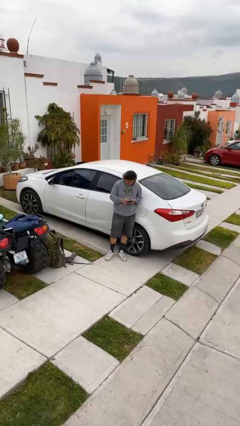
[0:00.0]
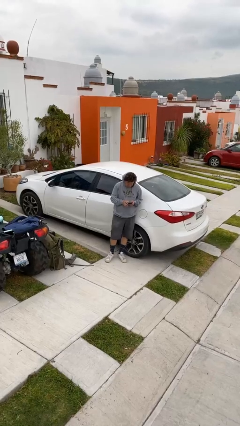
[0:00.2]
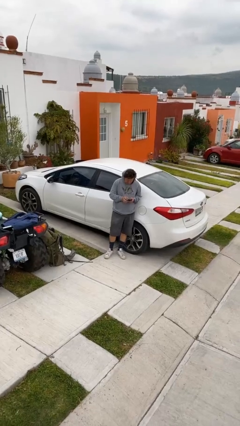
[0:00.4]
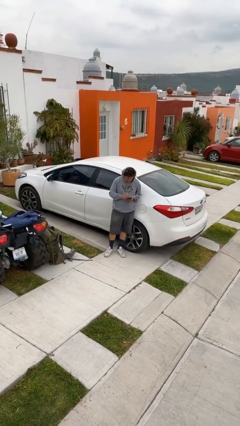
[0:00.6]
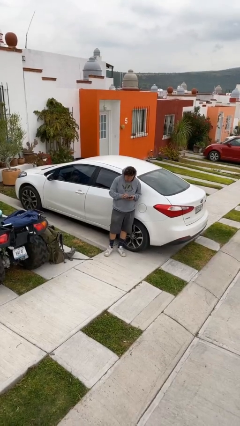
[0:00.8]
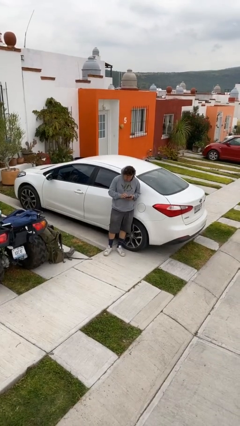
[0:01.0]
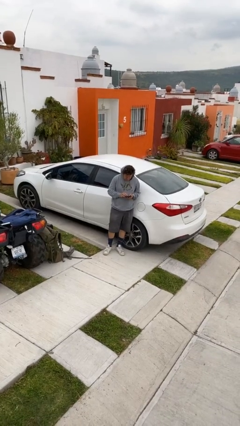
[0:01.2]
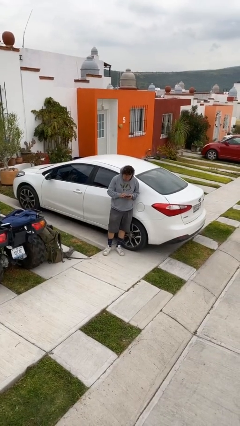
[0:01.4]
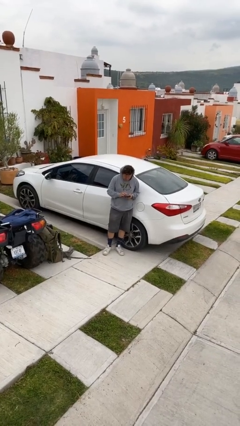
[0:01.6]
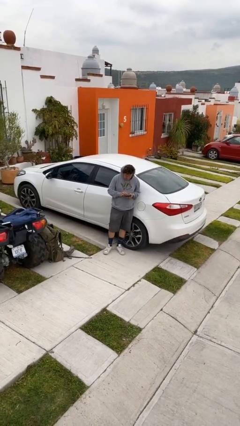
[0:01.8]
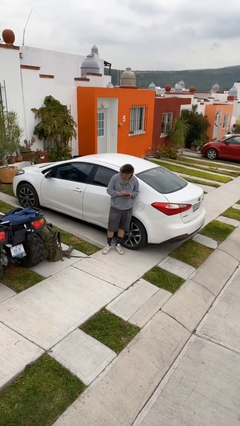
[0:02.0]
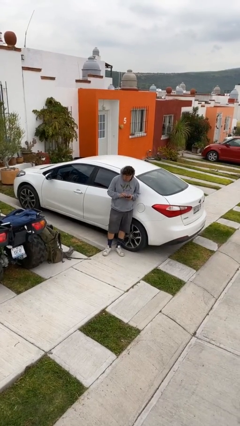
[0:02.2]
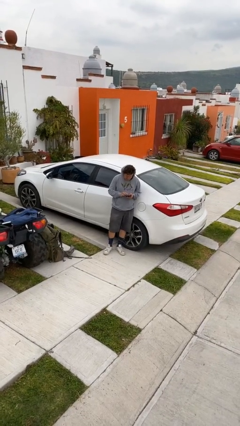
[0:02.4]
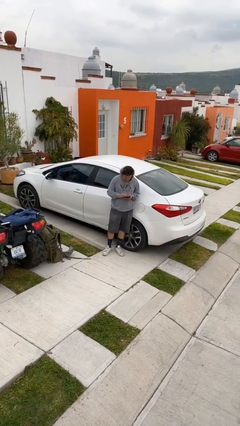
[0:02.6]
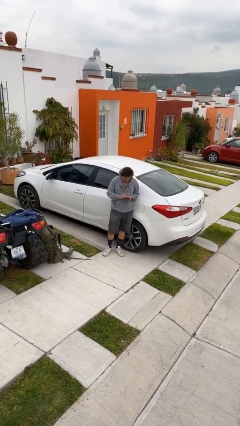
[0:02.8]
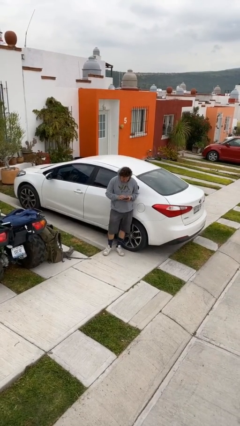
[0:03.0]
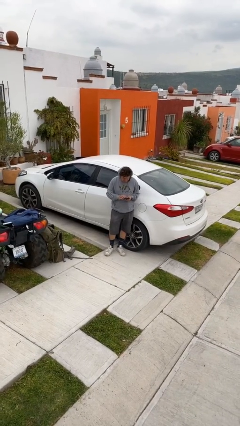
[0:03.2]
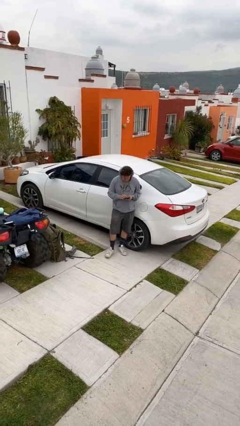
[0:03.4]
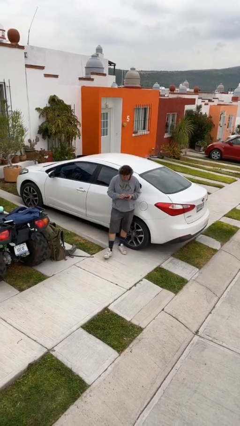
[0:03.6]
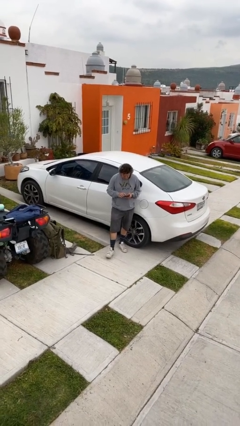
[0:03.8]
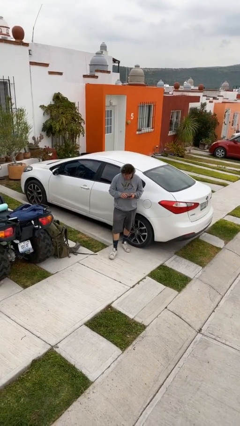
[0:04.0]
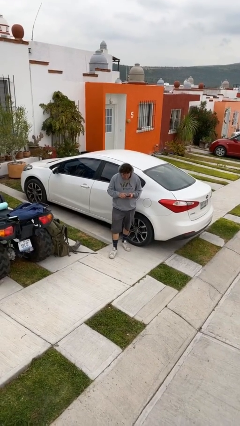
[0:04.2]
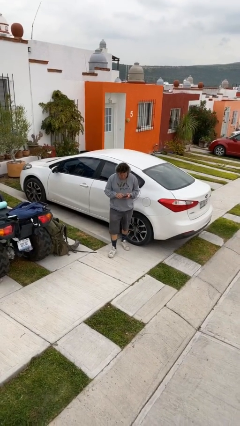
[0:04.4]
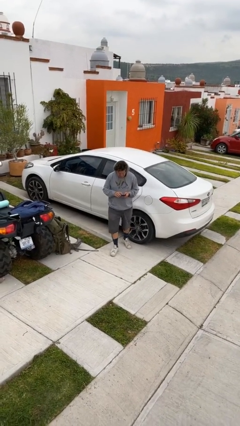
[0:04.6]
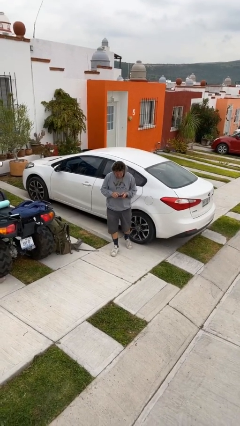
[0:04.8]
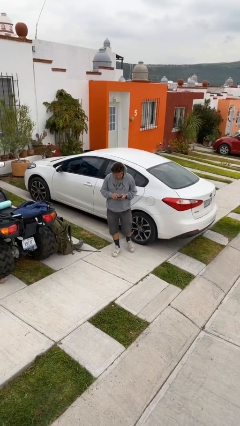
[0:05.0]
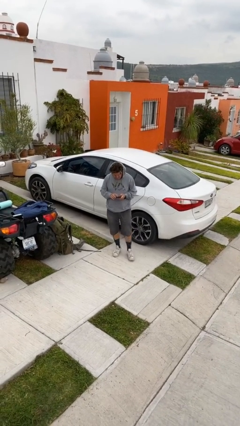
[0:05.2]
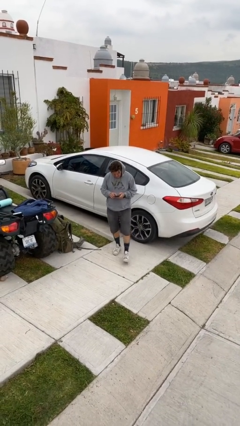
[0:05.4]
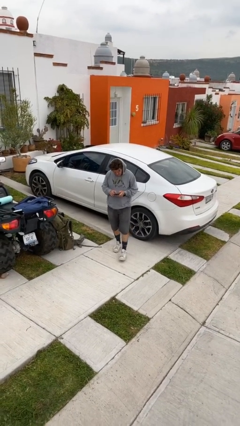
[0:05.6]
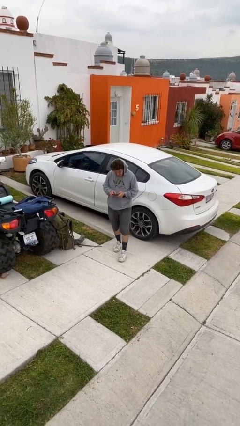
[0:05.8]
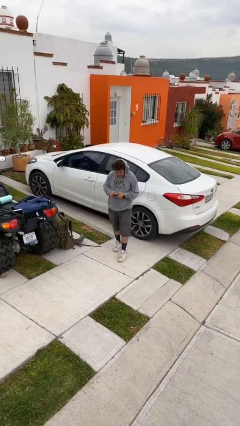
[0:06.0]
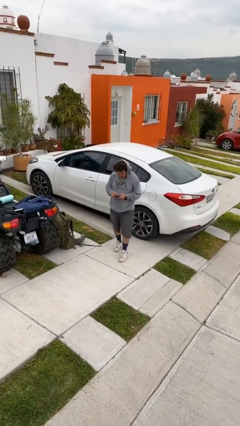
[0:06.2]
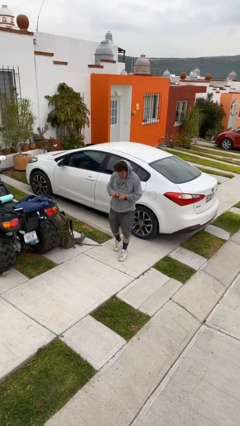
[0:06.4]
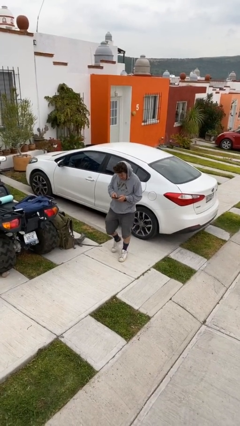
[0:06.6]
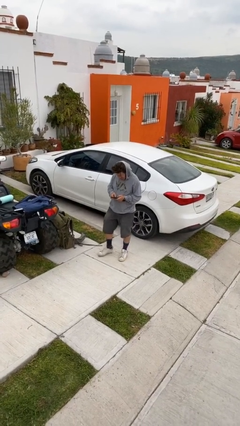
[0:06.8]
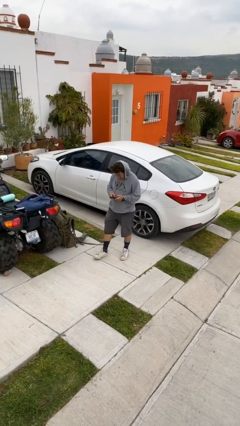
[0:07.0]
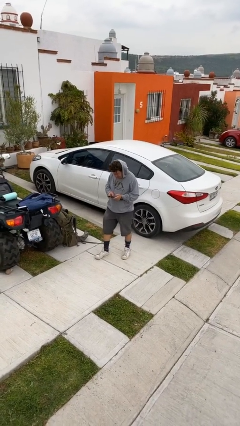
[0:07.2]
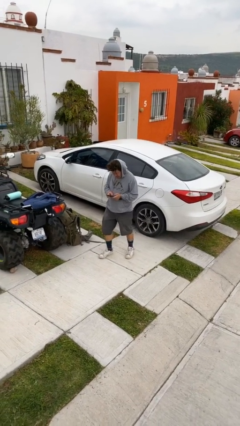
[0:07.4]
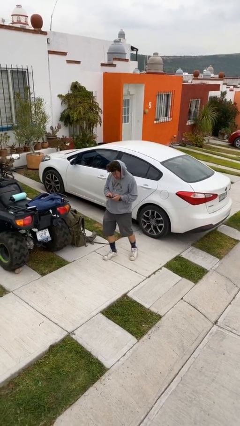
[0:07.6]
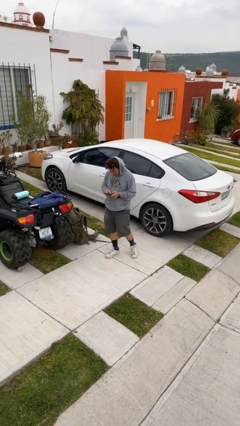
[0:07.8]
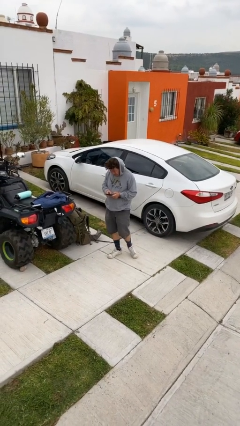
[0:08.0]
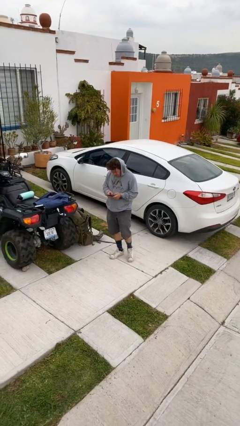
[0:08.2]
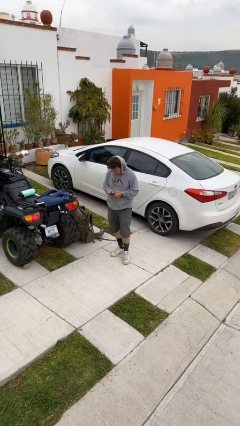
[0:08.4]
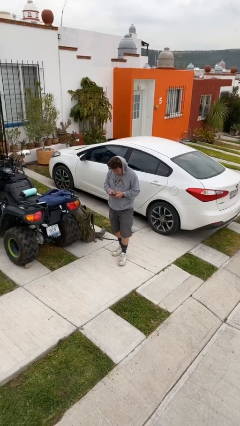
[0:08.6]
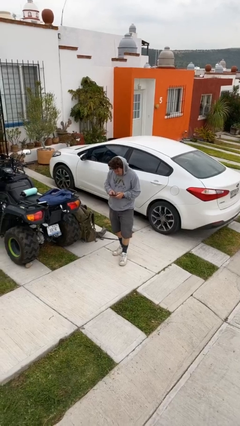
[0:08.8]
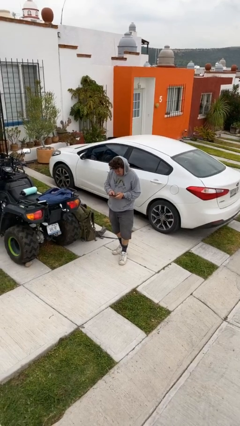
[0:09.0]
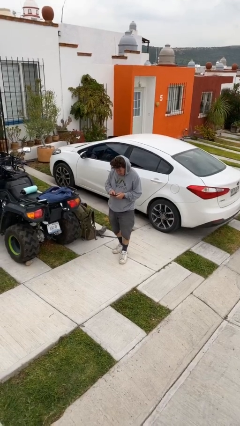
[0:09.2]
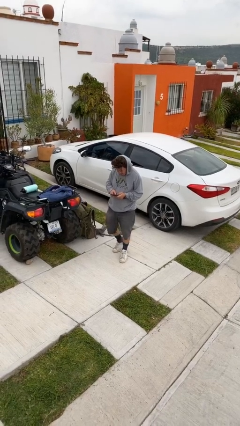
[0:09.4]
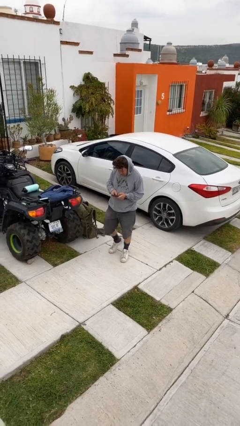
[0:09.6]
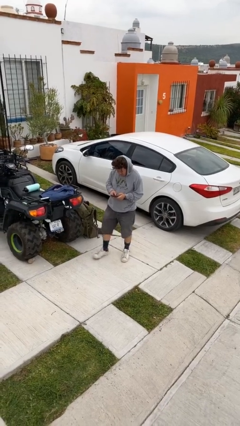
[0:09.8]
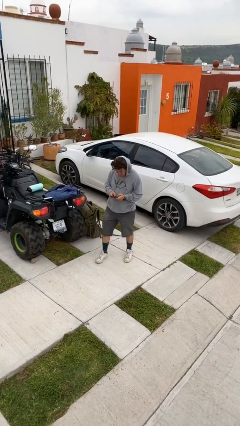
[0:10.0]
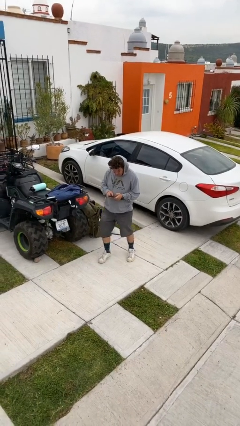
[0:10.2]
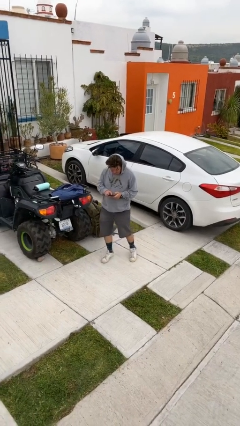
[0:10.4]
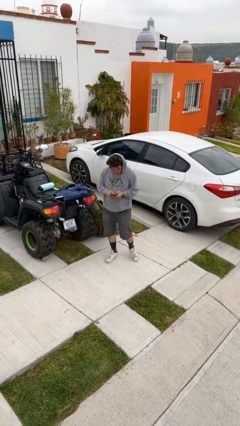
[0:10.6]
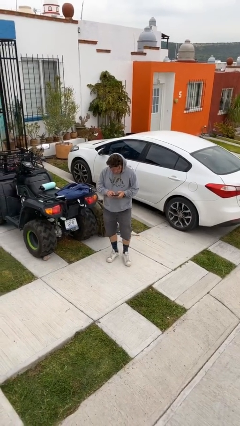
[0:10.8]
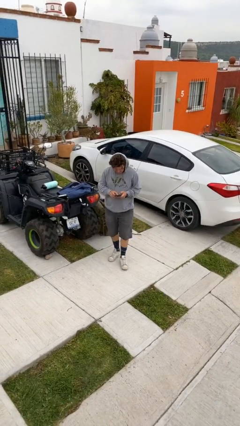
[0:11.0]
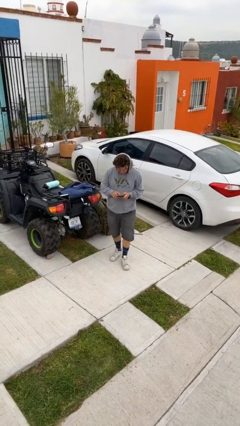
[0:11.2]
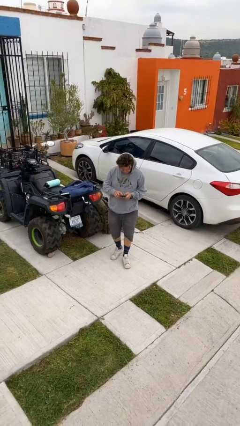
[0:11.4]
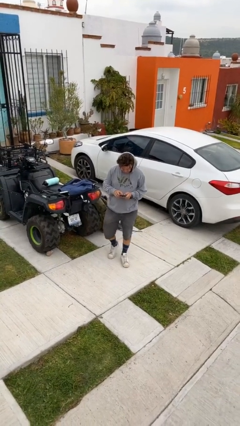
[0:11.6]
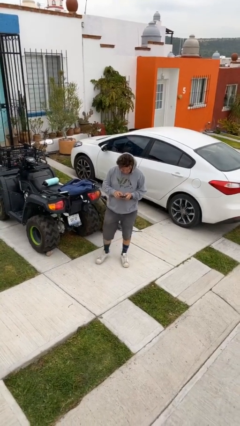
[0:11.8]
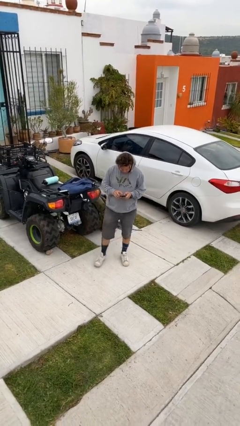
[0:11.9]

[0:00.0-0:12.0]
person texts on phone

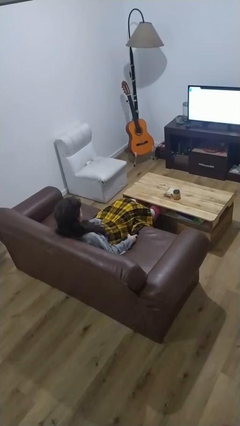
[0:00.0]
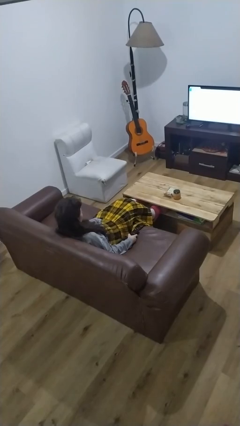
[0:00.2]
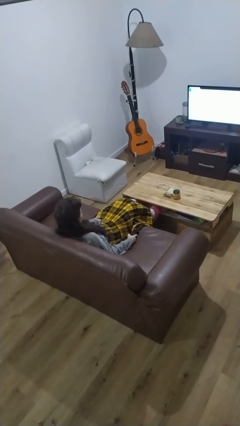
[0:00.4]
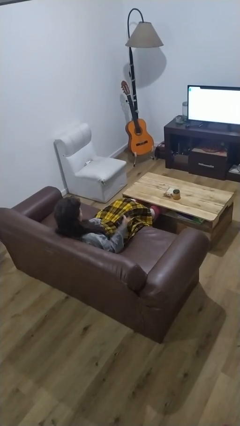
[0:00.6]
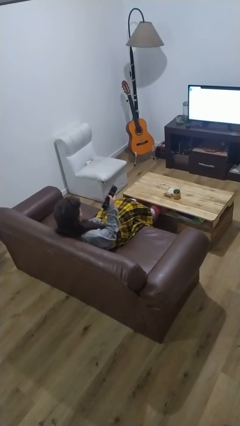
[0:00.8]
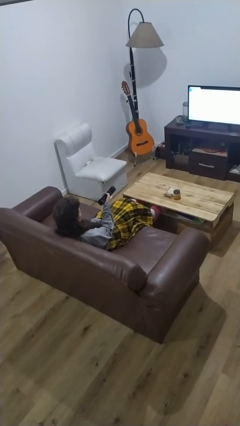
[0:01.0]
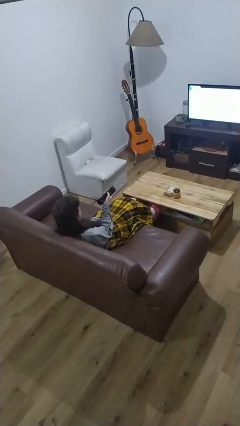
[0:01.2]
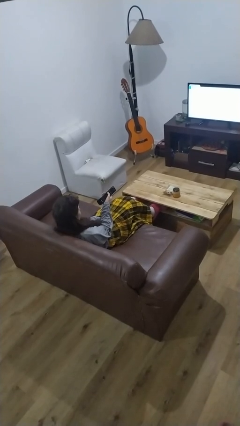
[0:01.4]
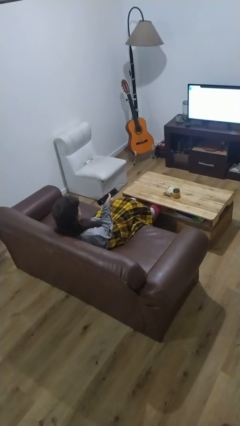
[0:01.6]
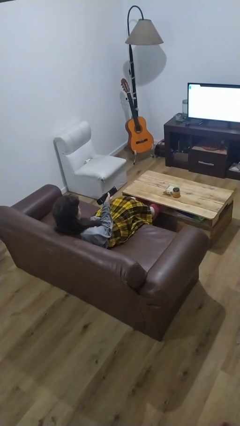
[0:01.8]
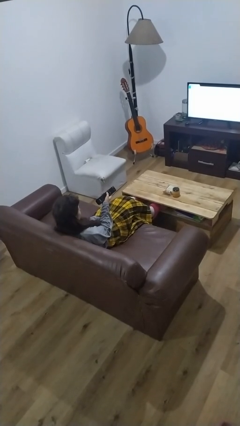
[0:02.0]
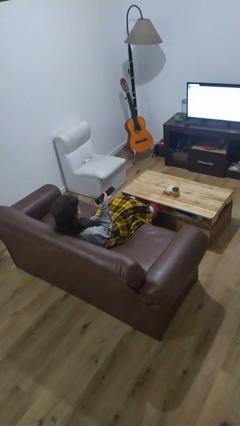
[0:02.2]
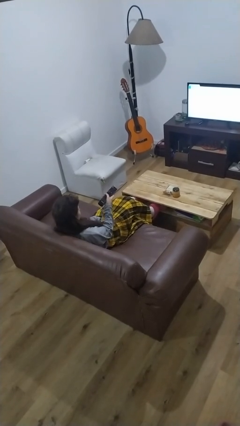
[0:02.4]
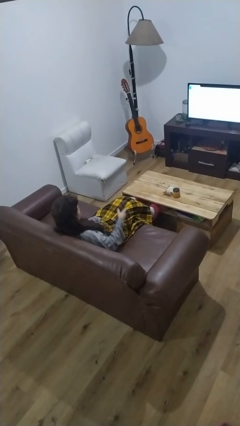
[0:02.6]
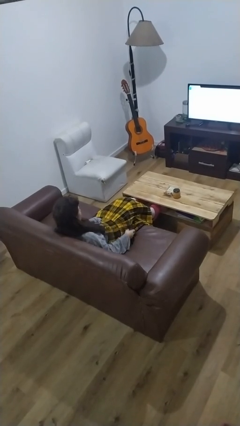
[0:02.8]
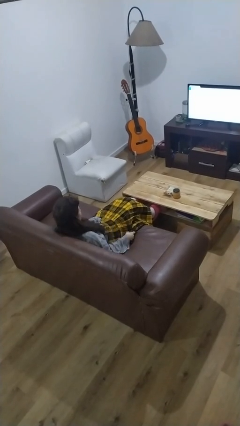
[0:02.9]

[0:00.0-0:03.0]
person uses television remote

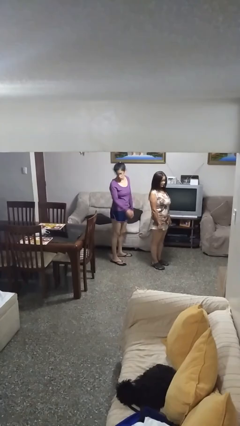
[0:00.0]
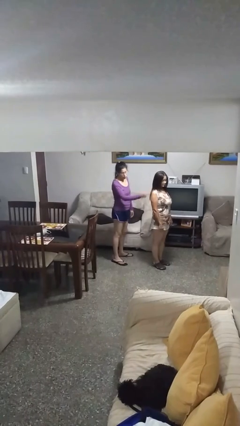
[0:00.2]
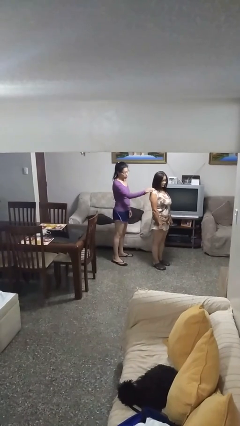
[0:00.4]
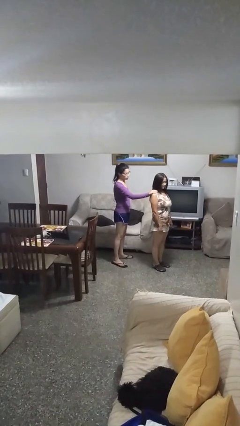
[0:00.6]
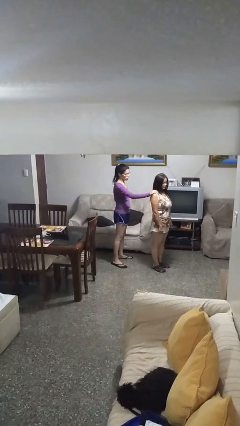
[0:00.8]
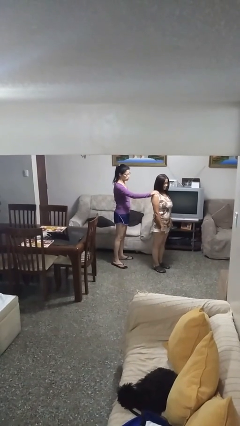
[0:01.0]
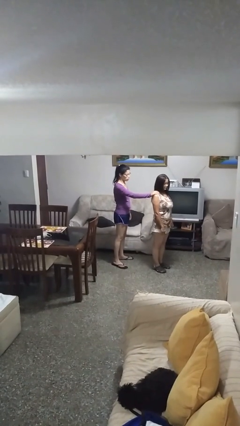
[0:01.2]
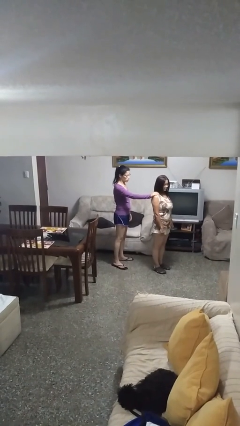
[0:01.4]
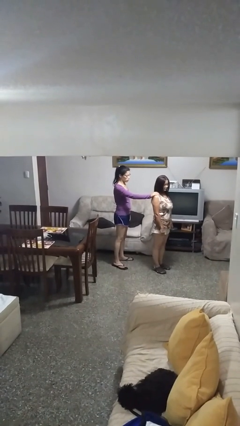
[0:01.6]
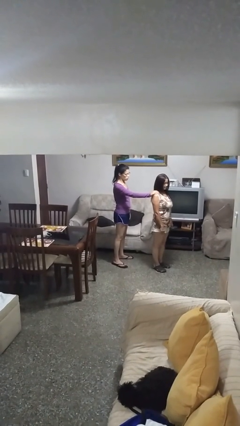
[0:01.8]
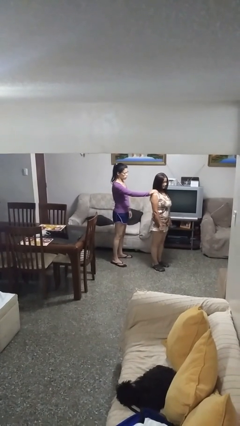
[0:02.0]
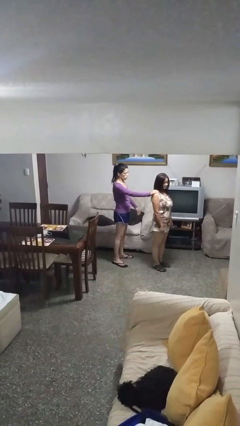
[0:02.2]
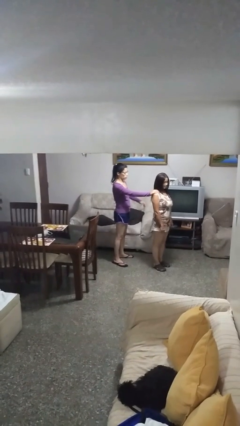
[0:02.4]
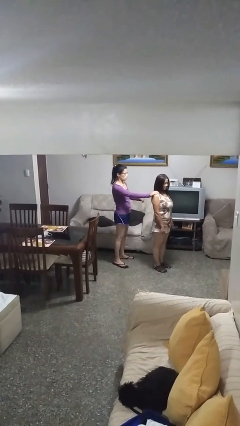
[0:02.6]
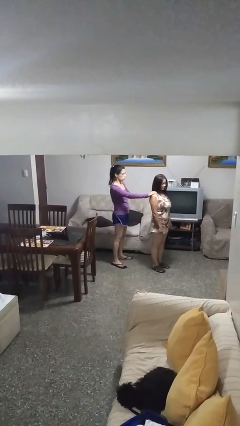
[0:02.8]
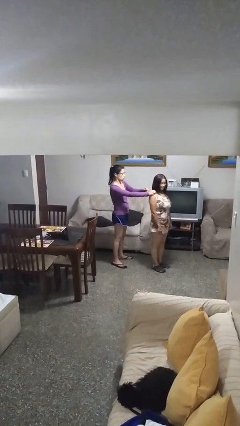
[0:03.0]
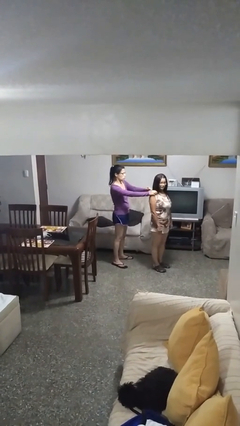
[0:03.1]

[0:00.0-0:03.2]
person grabs person by shoulder
